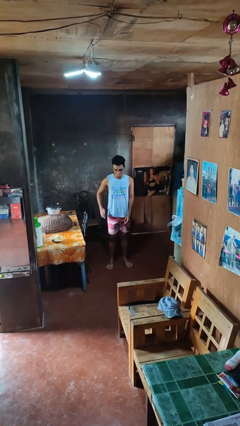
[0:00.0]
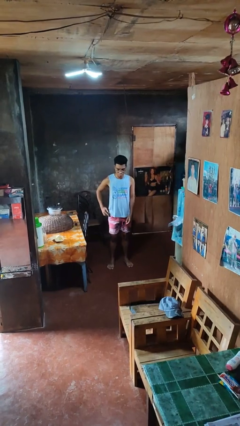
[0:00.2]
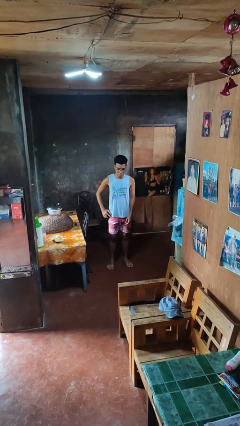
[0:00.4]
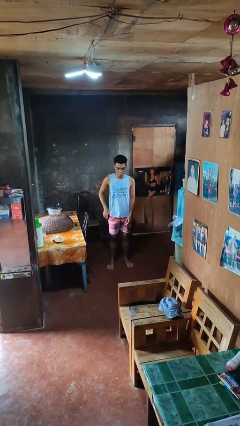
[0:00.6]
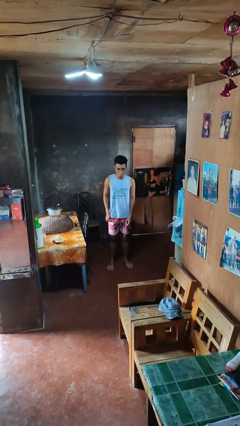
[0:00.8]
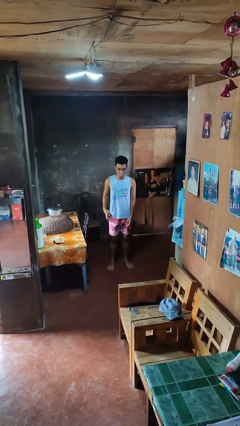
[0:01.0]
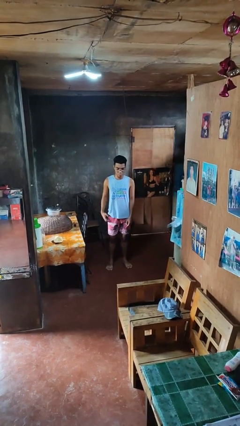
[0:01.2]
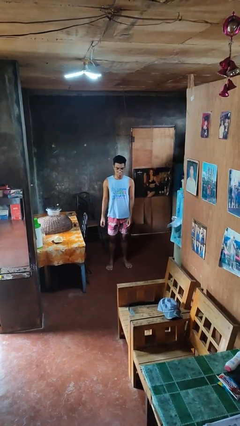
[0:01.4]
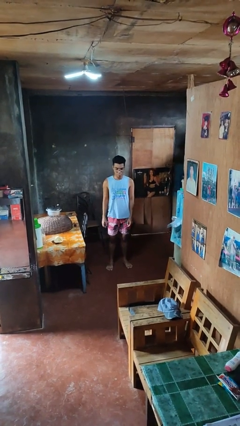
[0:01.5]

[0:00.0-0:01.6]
person puts phone into pocket

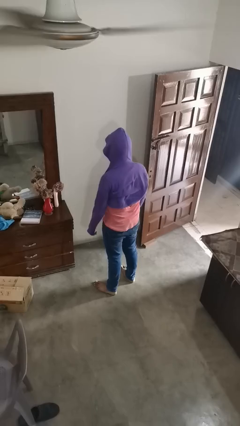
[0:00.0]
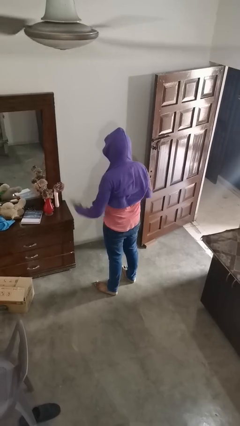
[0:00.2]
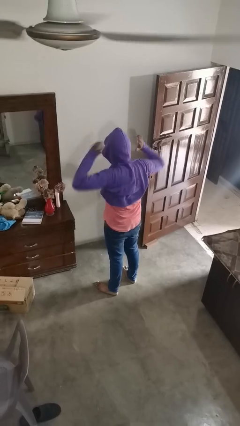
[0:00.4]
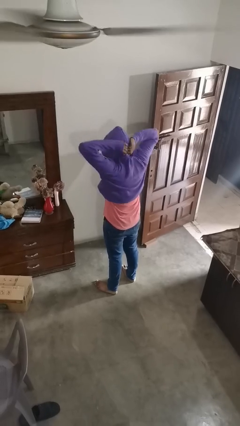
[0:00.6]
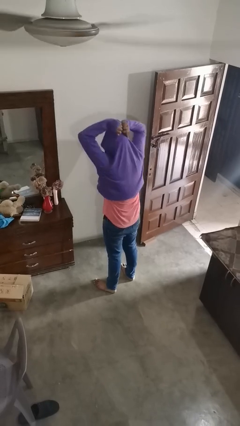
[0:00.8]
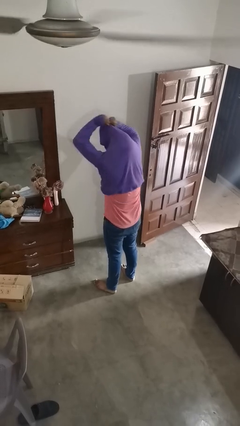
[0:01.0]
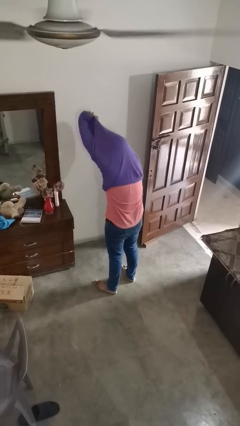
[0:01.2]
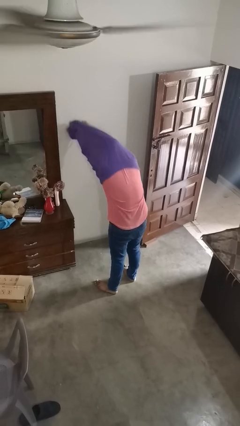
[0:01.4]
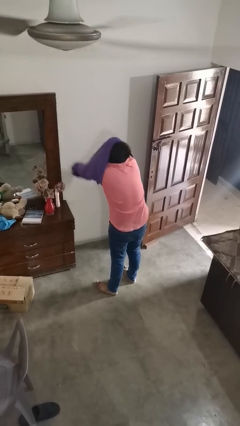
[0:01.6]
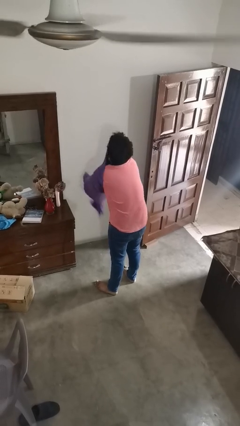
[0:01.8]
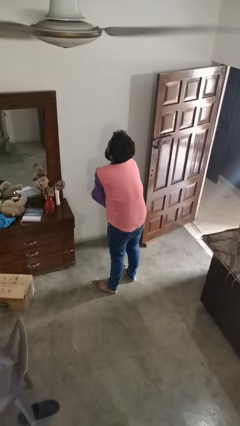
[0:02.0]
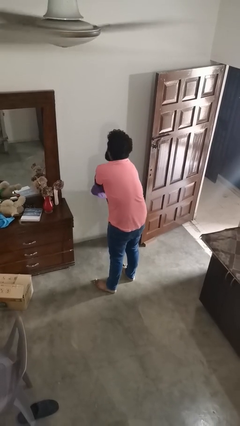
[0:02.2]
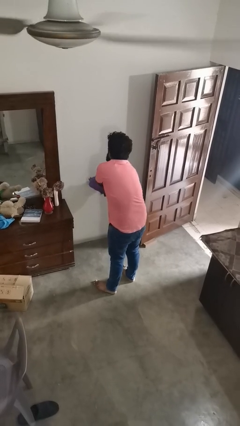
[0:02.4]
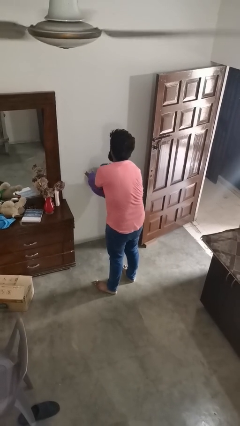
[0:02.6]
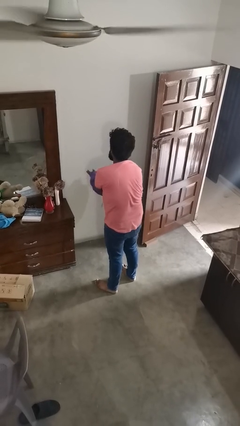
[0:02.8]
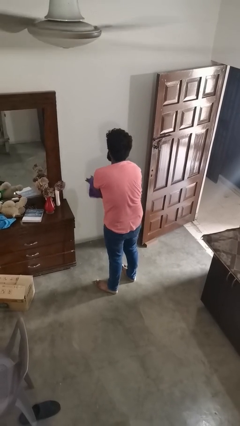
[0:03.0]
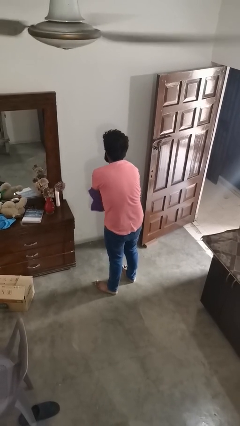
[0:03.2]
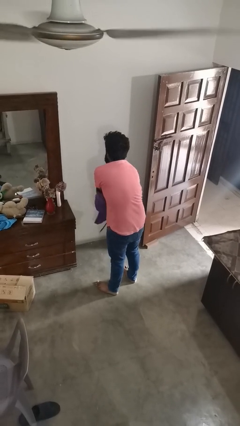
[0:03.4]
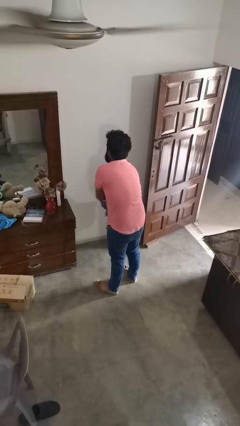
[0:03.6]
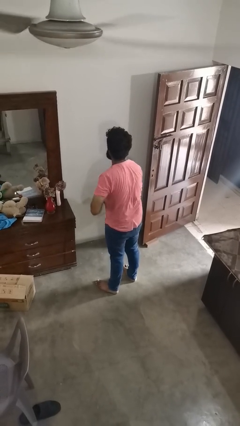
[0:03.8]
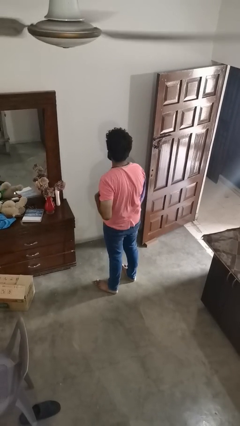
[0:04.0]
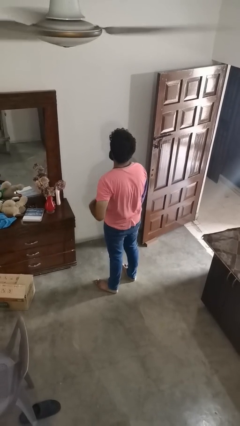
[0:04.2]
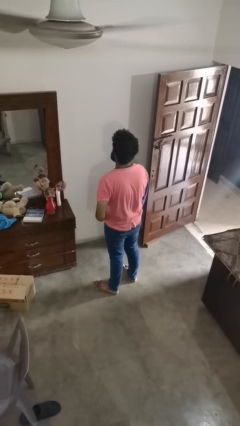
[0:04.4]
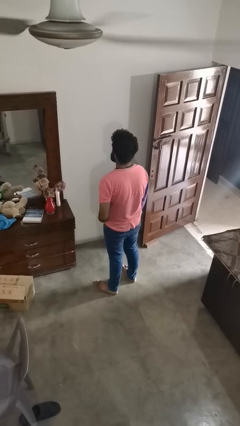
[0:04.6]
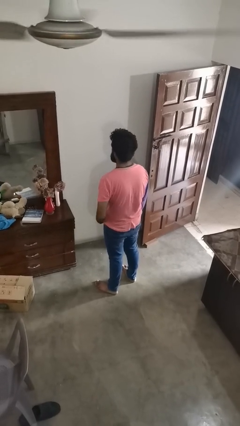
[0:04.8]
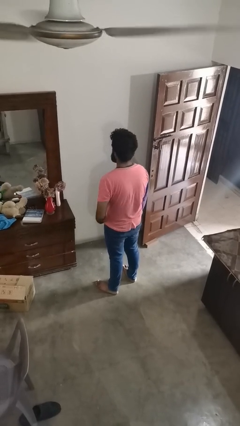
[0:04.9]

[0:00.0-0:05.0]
person takes off hoodie

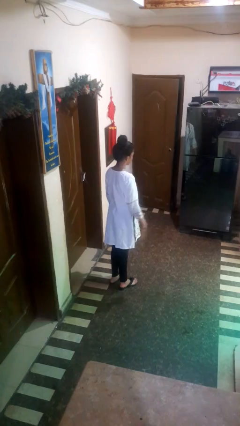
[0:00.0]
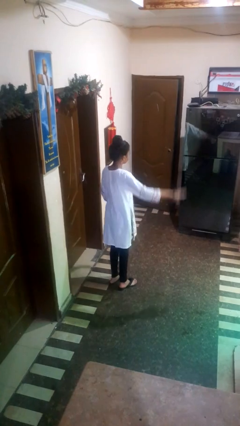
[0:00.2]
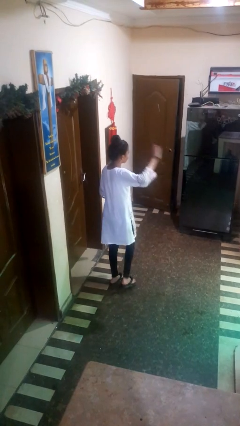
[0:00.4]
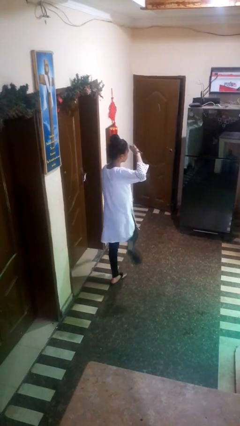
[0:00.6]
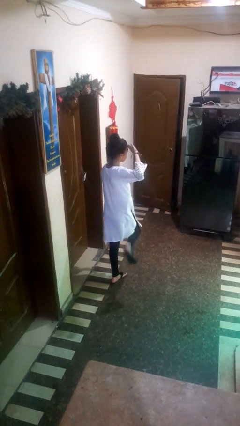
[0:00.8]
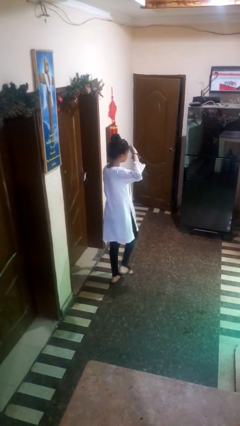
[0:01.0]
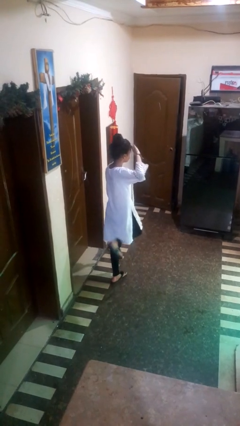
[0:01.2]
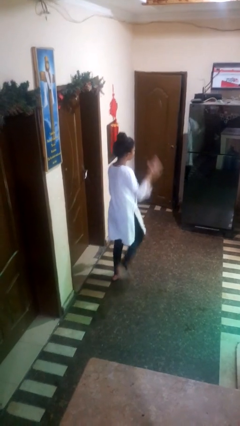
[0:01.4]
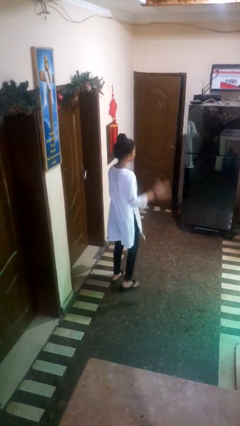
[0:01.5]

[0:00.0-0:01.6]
person salutes

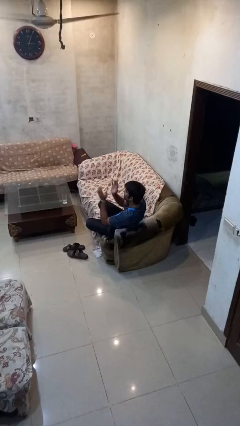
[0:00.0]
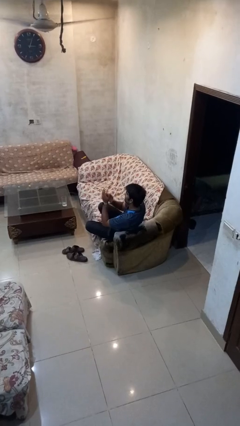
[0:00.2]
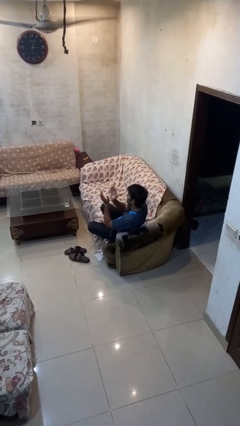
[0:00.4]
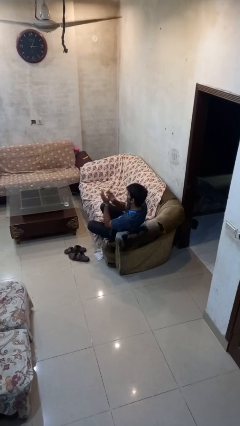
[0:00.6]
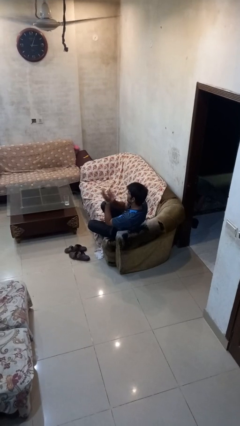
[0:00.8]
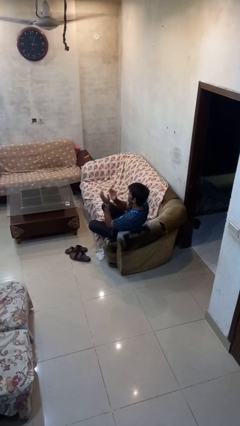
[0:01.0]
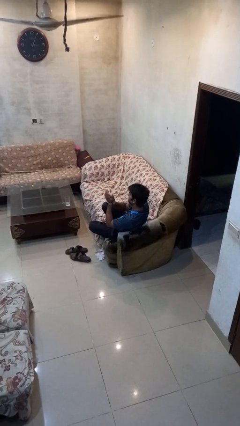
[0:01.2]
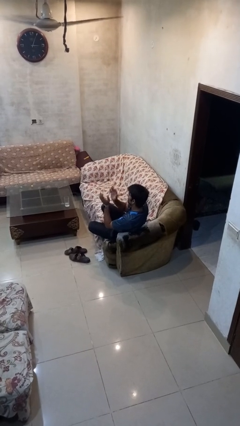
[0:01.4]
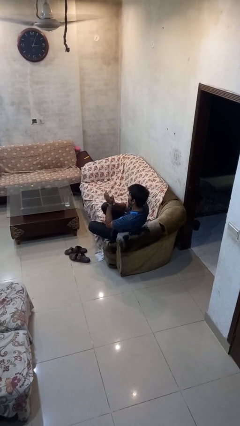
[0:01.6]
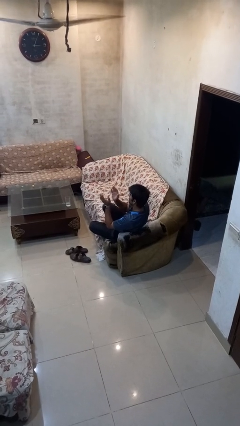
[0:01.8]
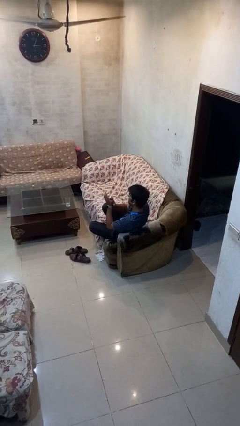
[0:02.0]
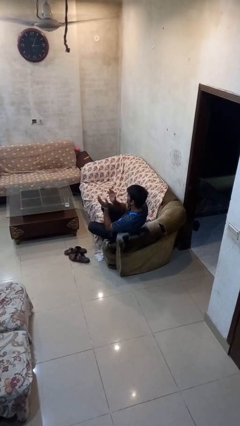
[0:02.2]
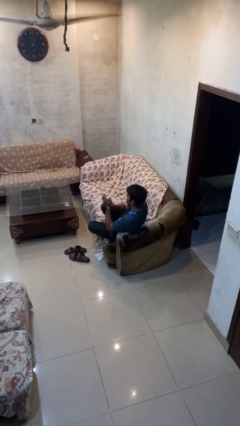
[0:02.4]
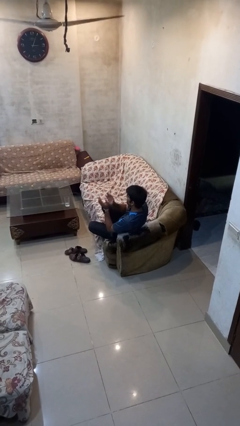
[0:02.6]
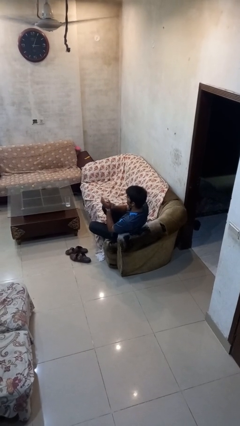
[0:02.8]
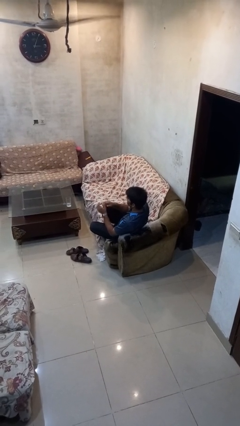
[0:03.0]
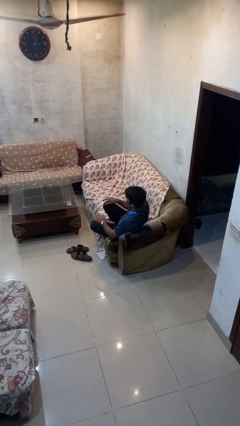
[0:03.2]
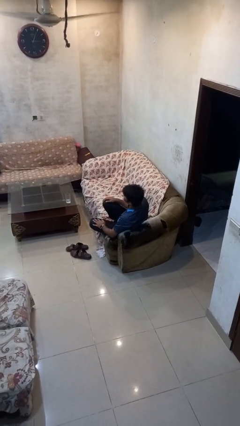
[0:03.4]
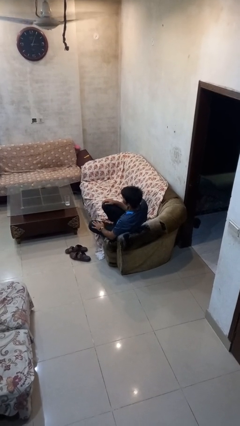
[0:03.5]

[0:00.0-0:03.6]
person claps hands

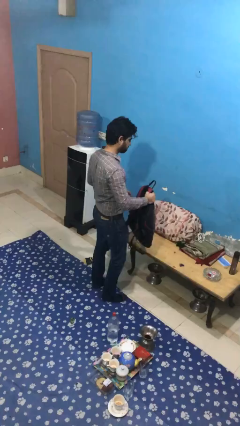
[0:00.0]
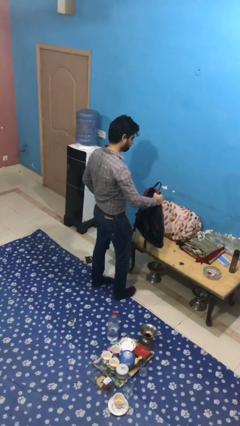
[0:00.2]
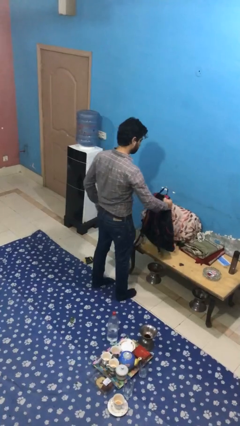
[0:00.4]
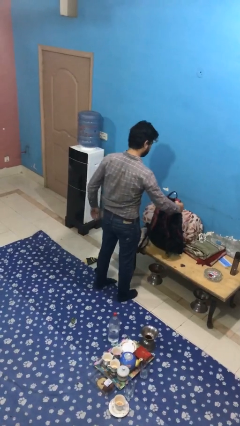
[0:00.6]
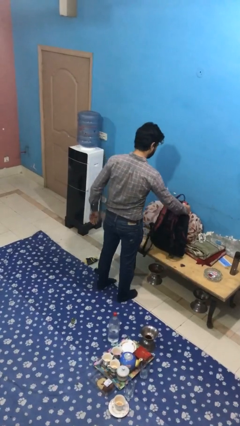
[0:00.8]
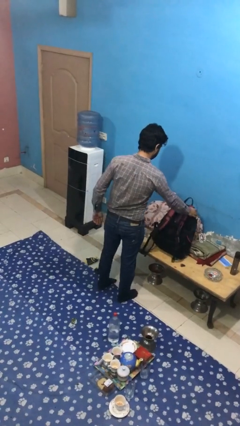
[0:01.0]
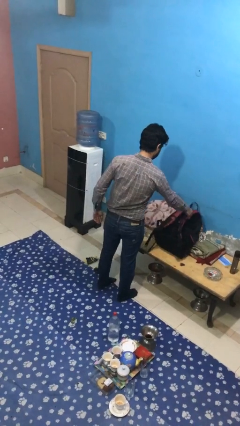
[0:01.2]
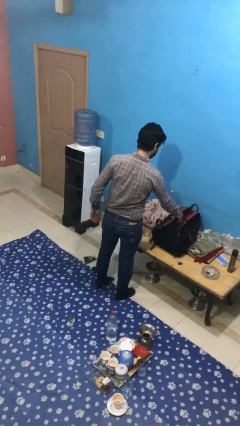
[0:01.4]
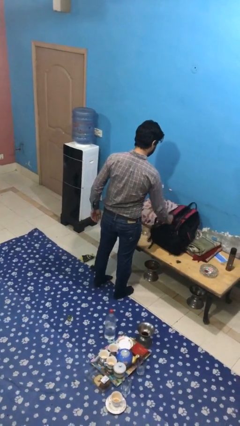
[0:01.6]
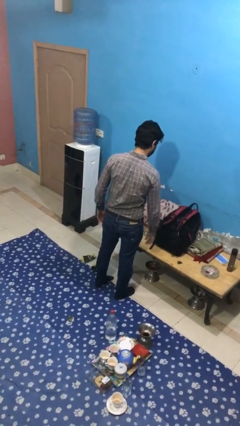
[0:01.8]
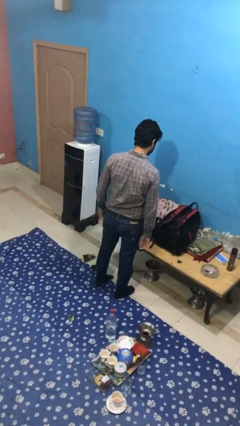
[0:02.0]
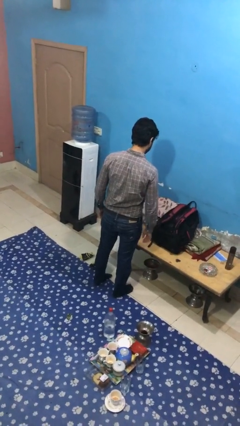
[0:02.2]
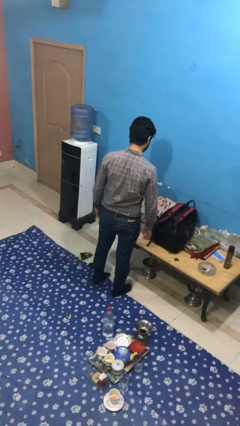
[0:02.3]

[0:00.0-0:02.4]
person puts down object on table

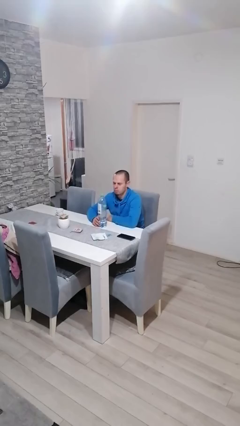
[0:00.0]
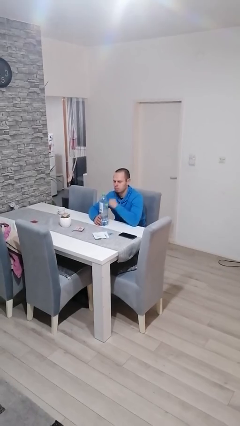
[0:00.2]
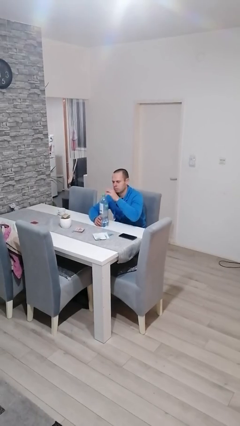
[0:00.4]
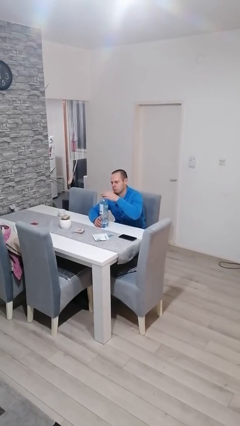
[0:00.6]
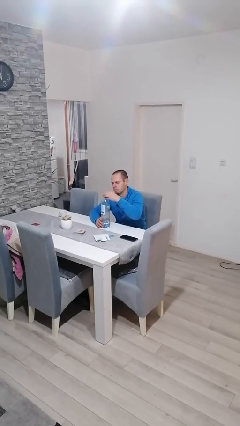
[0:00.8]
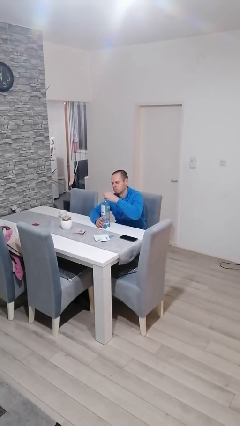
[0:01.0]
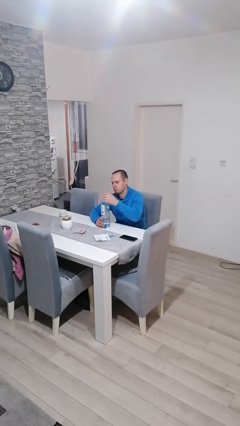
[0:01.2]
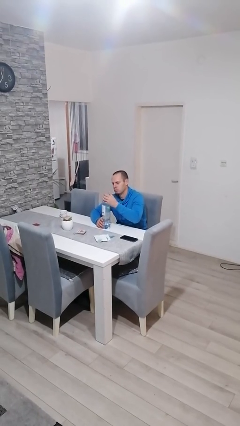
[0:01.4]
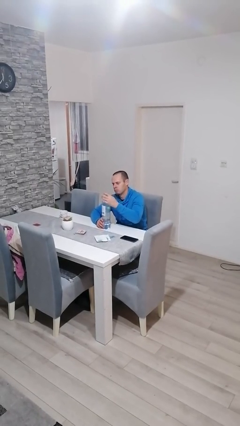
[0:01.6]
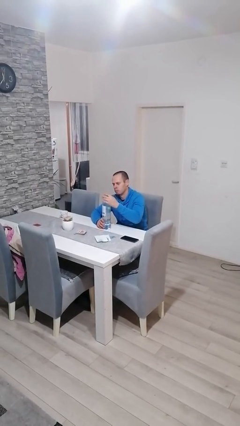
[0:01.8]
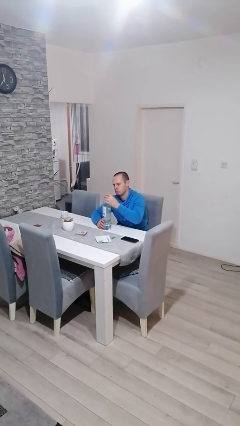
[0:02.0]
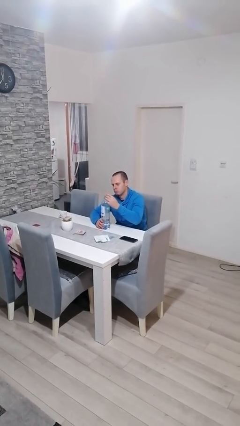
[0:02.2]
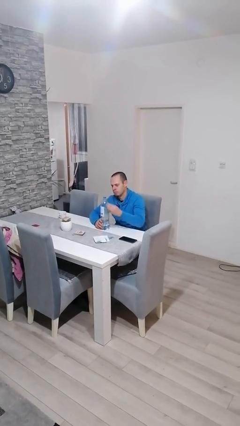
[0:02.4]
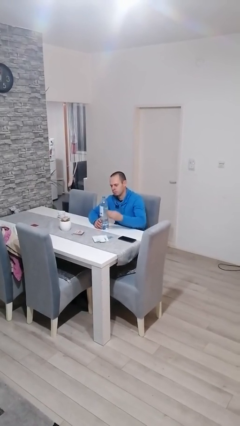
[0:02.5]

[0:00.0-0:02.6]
person unscrews lid from bottle

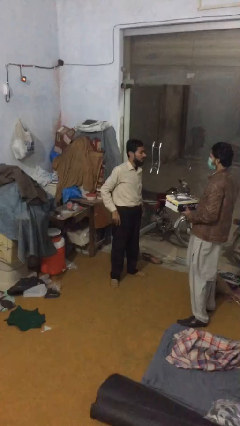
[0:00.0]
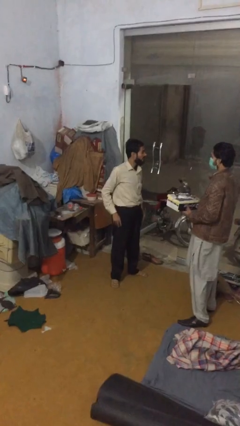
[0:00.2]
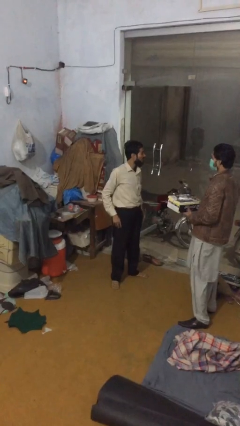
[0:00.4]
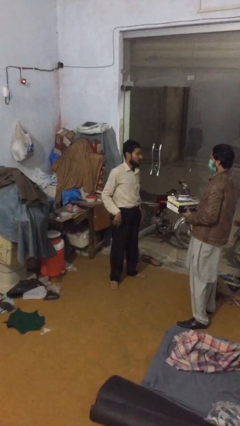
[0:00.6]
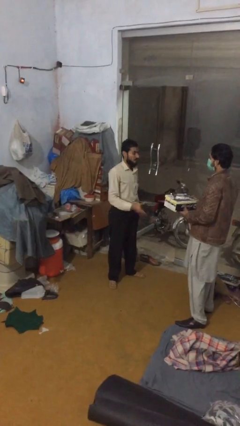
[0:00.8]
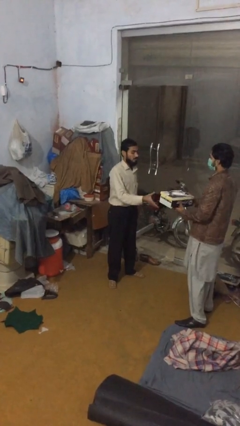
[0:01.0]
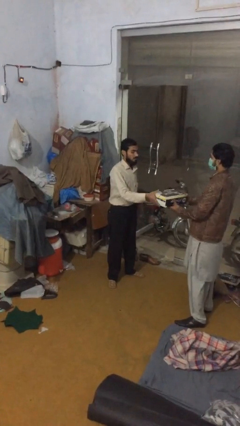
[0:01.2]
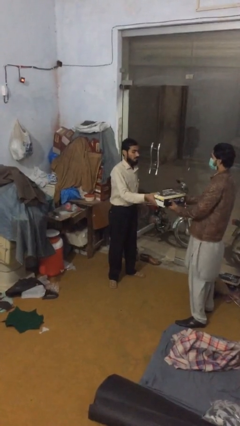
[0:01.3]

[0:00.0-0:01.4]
person transfers object to person
